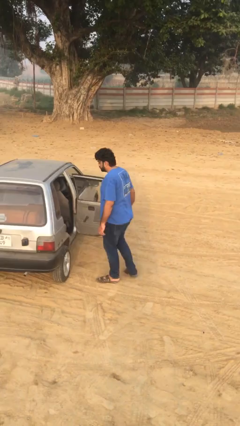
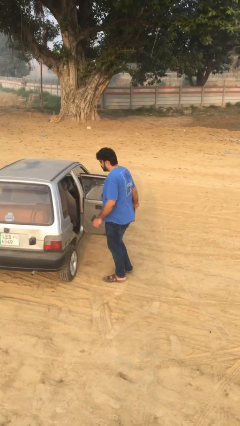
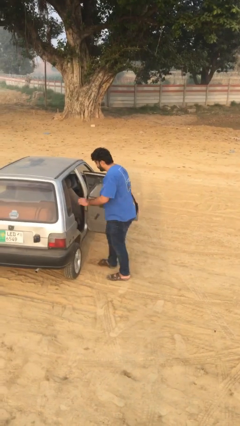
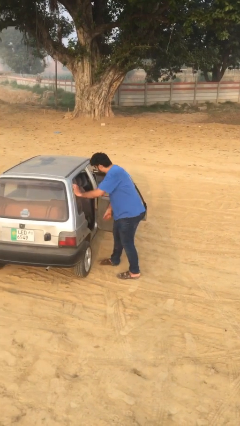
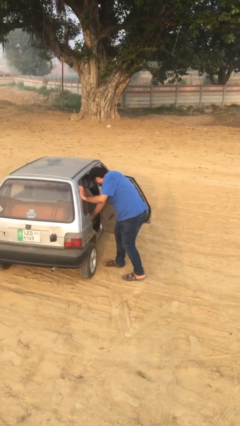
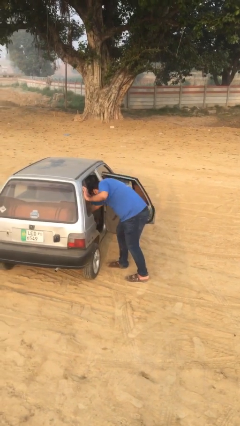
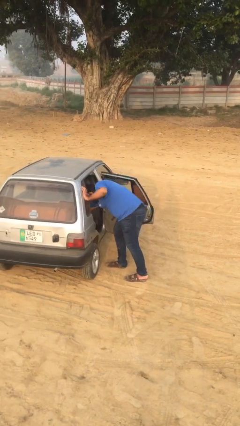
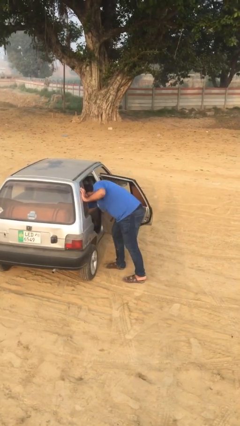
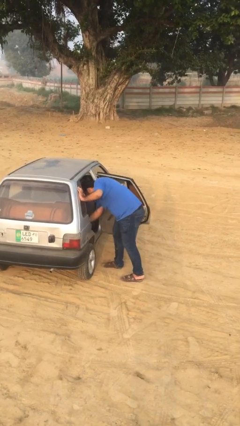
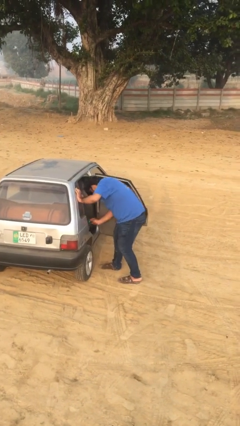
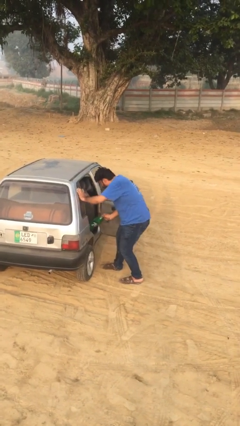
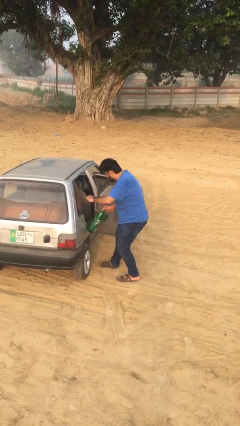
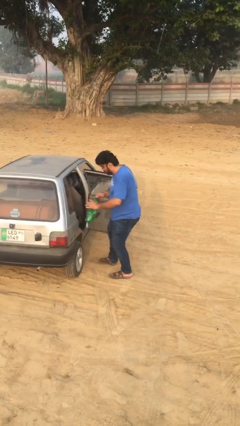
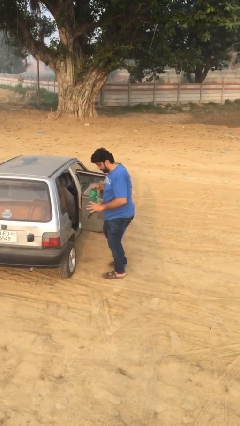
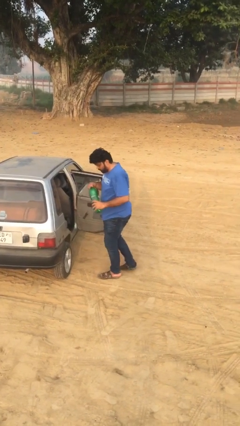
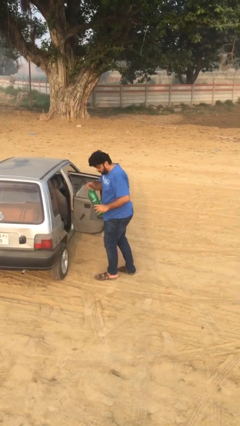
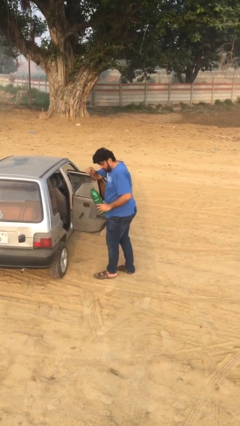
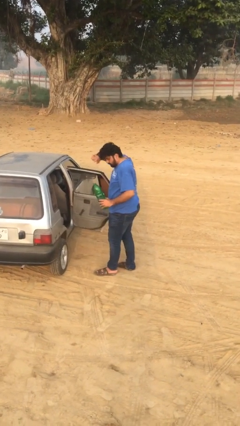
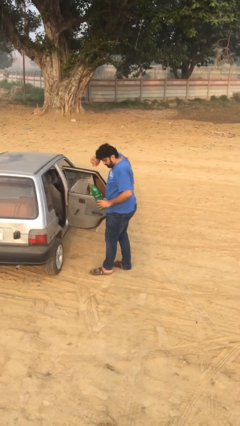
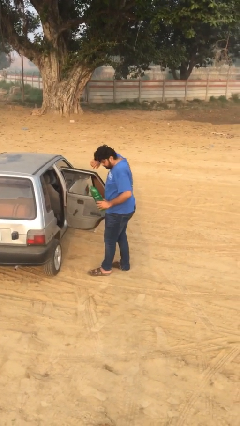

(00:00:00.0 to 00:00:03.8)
person unloads car

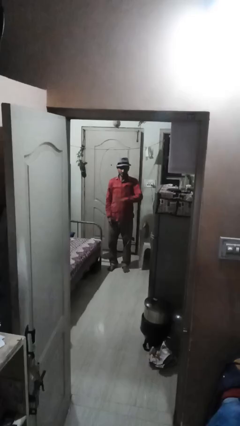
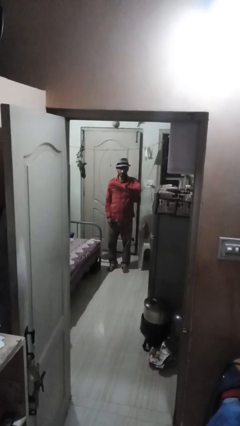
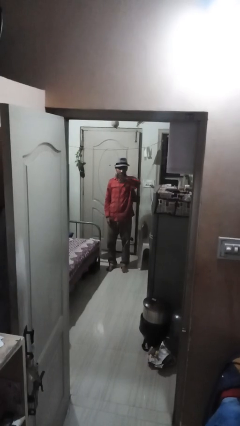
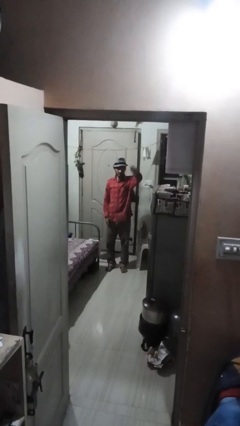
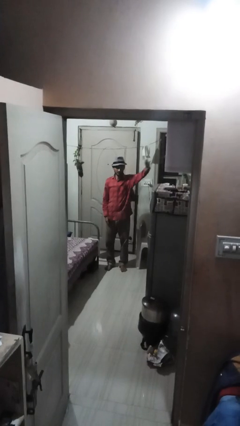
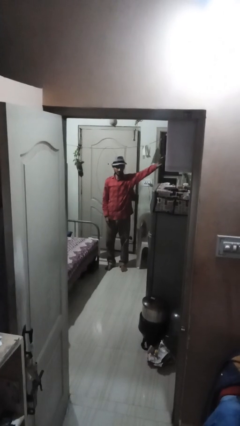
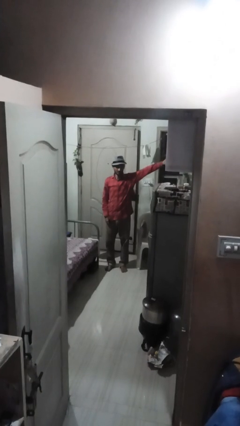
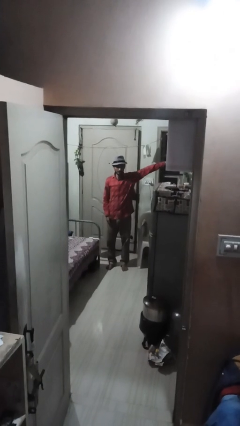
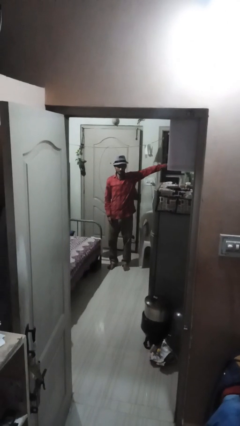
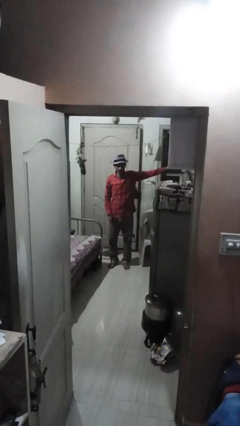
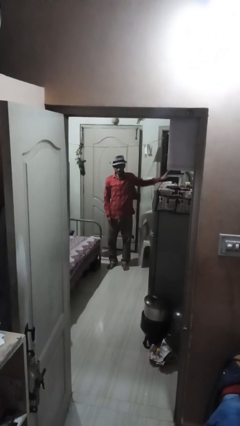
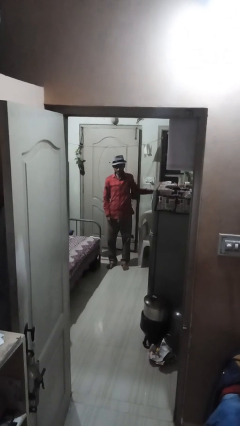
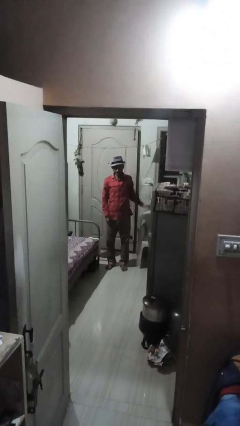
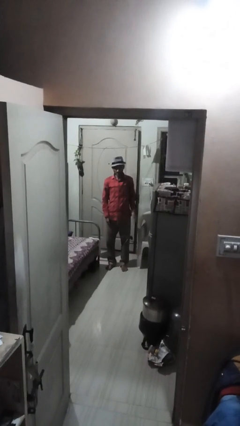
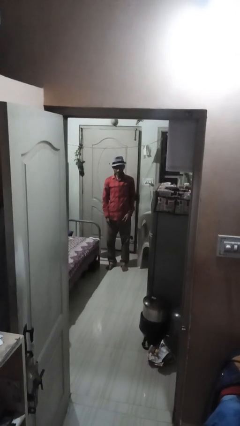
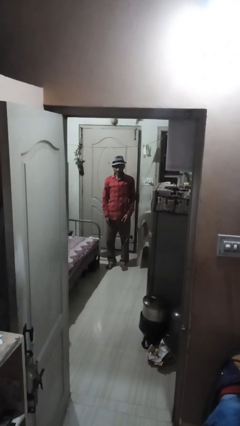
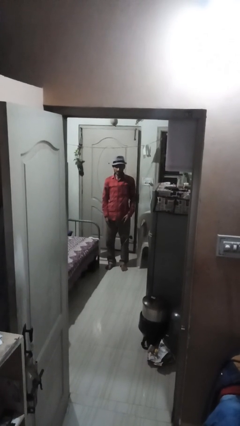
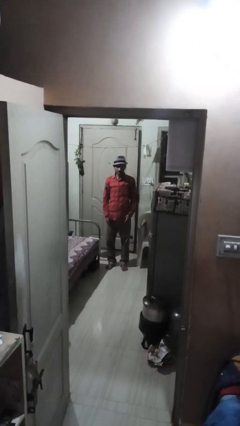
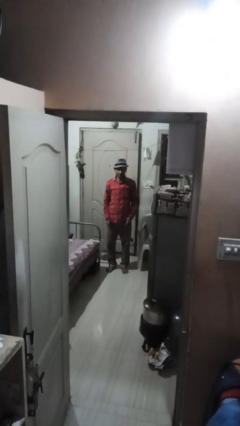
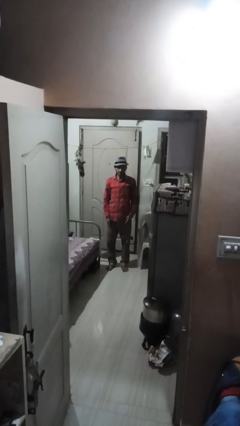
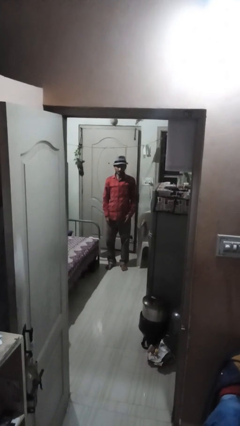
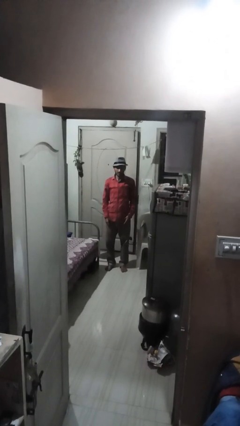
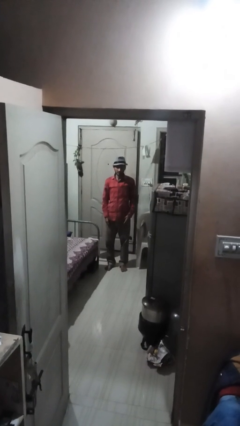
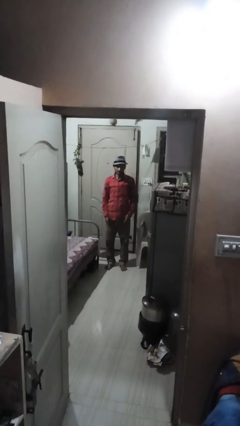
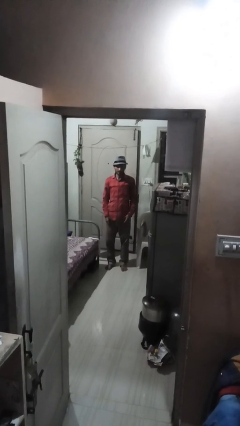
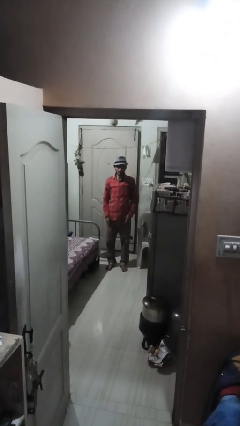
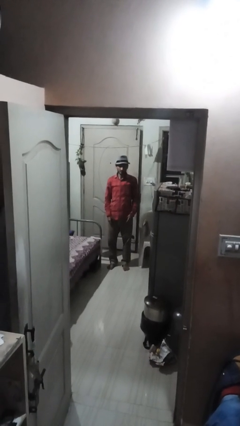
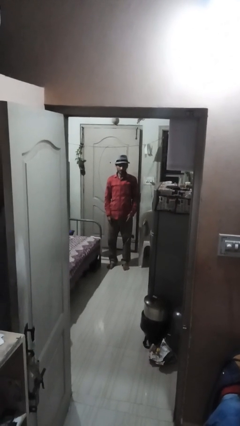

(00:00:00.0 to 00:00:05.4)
person gestures swipe left

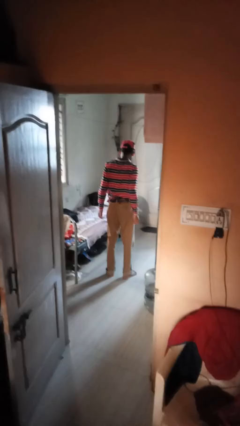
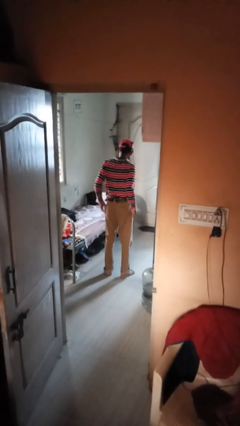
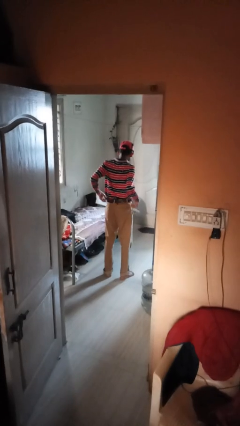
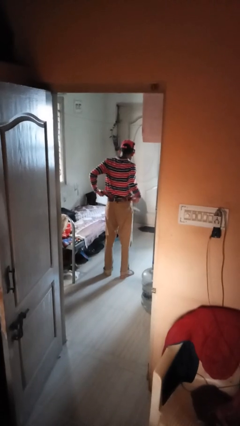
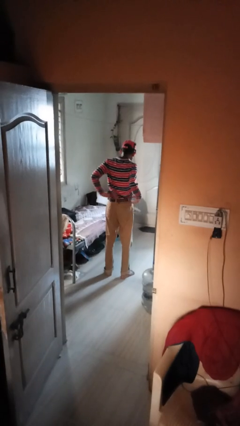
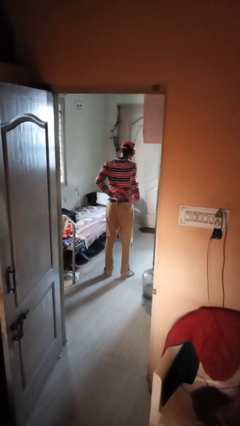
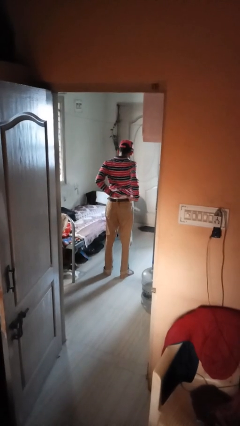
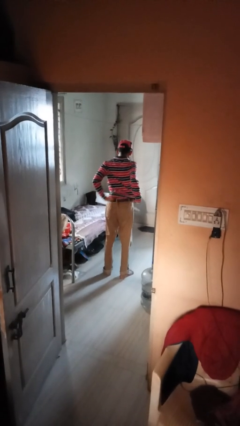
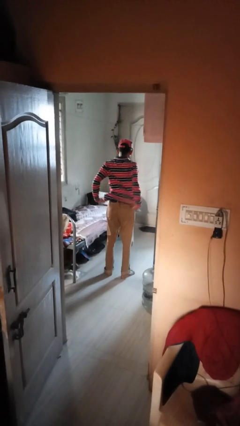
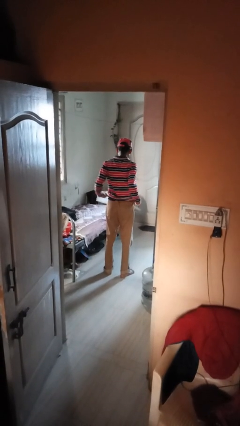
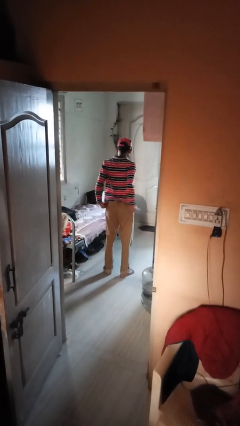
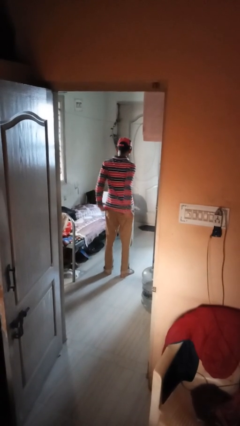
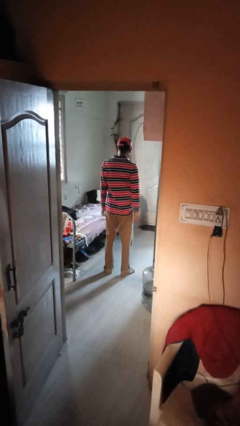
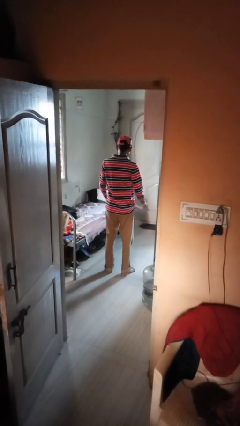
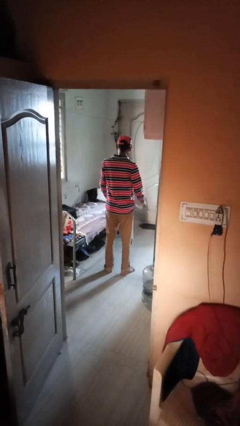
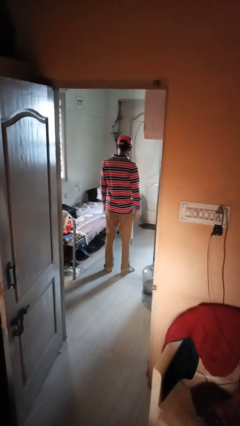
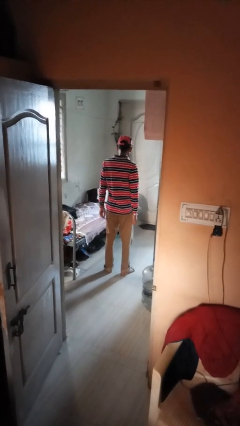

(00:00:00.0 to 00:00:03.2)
person untucks shirt

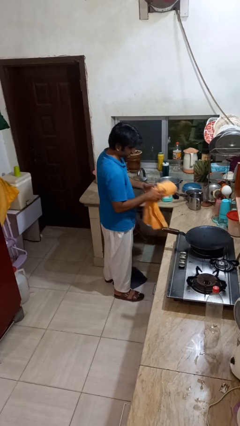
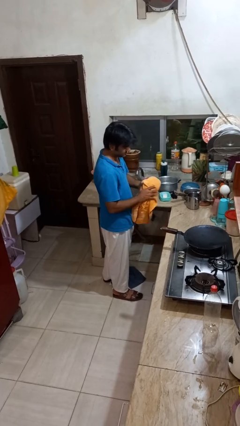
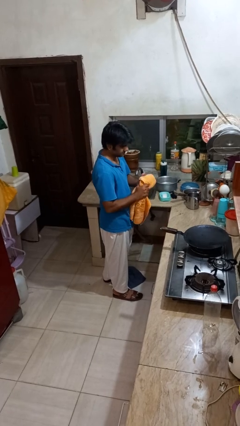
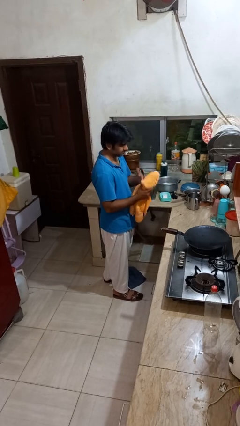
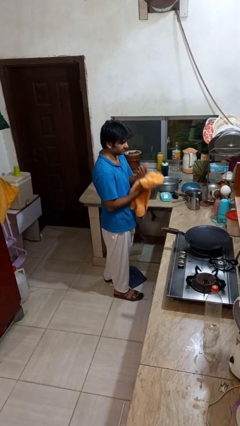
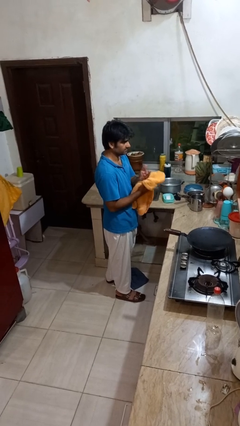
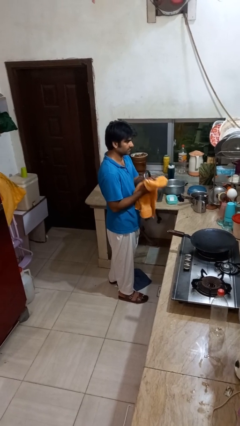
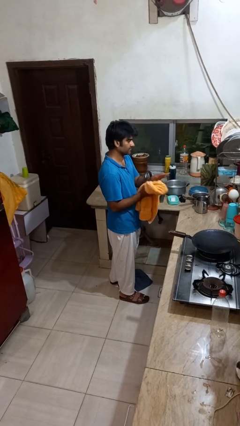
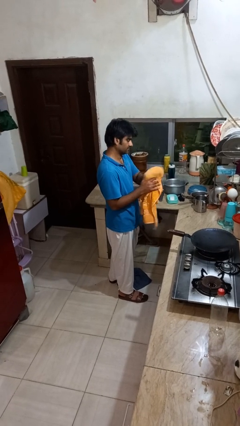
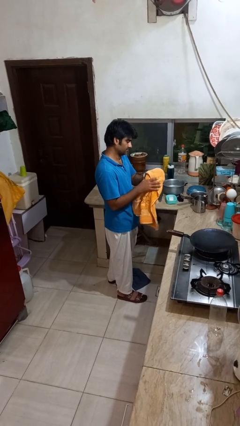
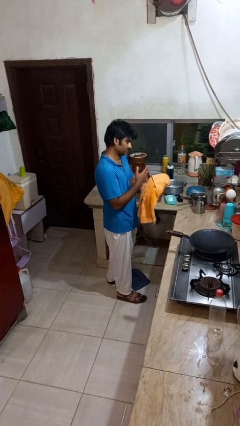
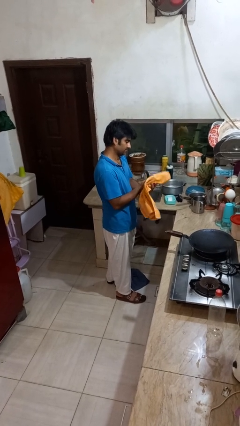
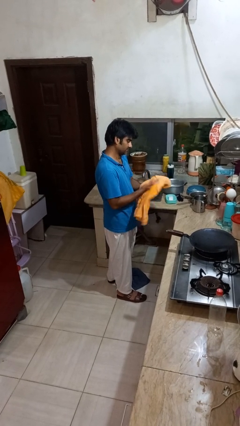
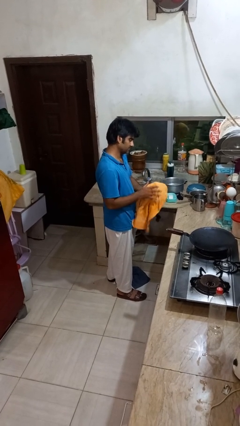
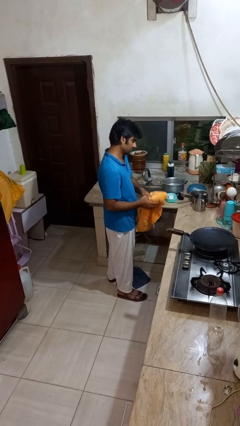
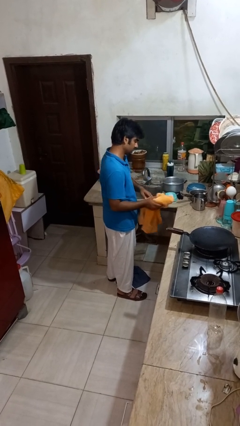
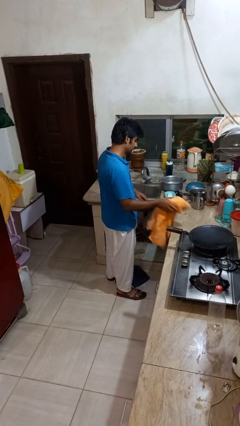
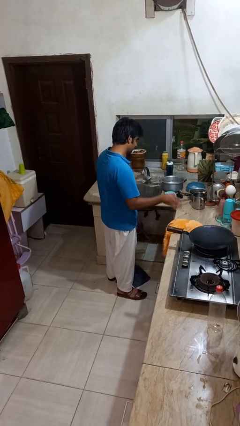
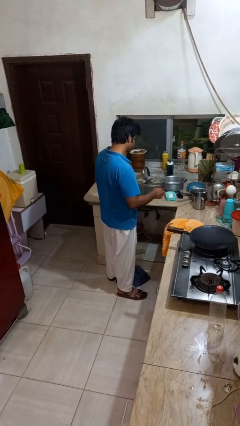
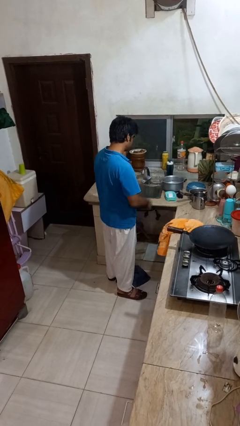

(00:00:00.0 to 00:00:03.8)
person dries hands with towel

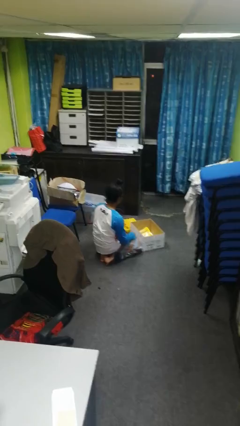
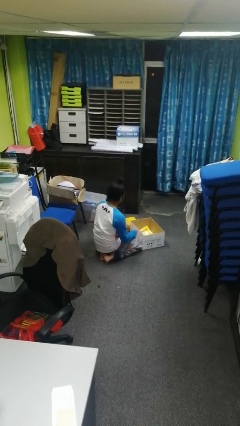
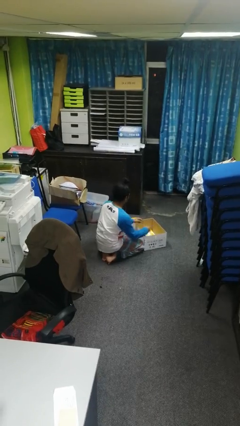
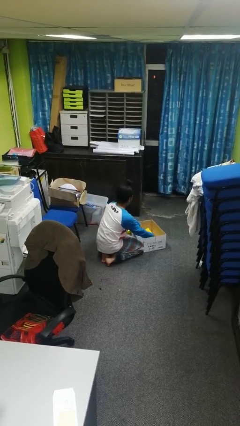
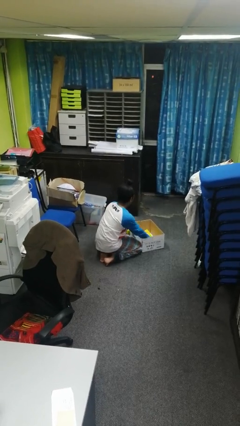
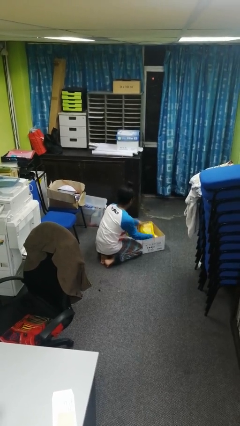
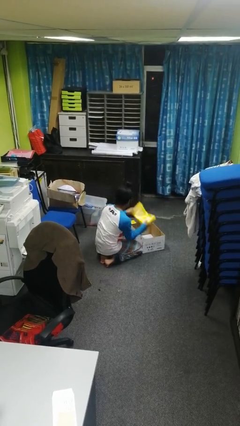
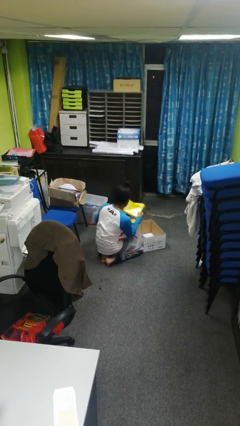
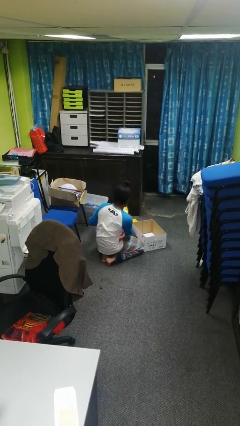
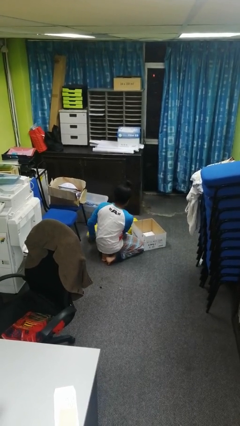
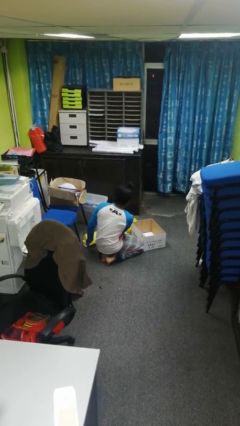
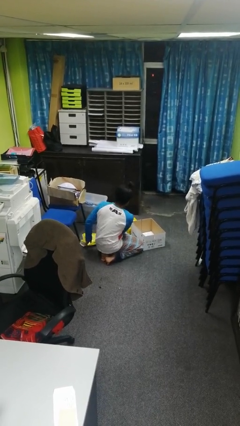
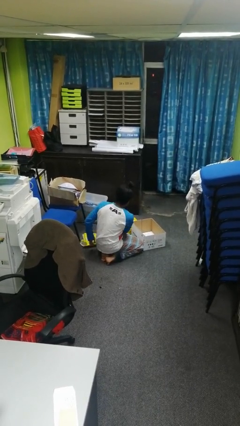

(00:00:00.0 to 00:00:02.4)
person takes object from box
